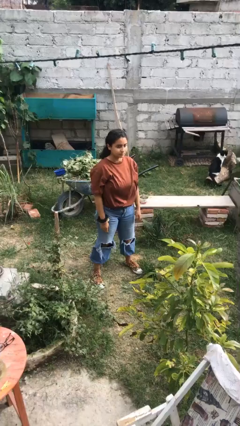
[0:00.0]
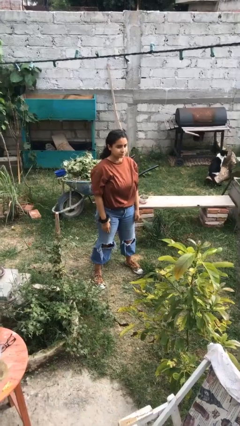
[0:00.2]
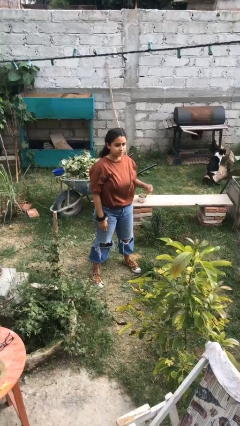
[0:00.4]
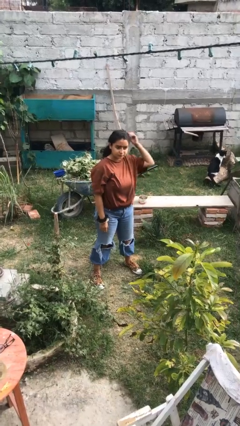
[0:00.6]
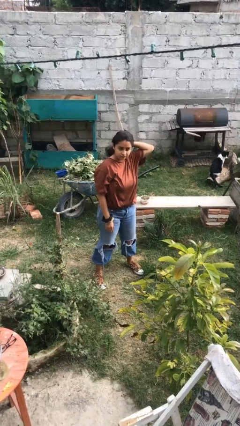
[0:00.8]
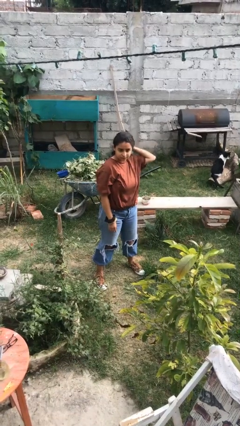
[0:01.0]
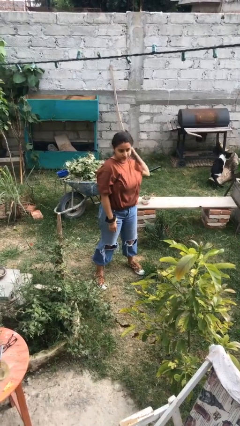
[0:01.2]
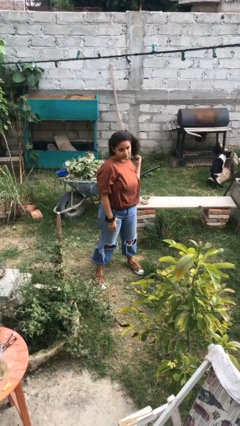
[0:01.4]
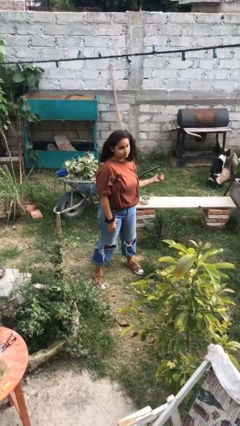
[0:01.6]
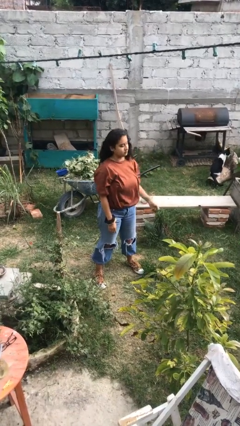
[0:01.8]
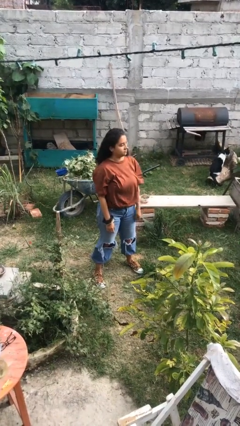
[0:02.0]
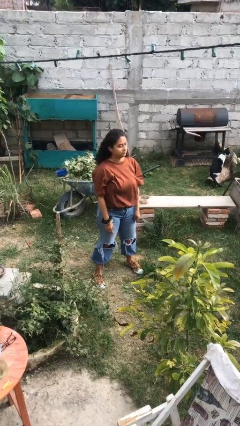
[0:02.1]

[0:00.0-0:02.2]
person takes off hairtie

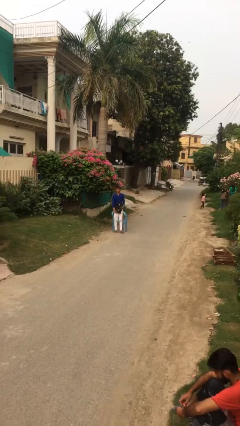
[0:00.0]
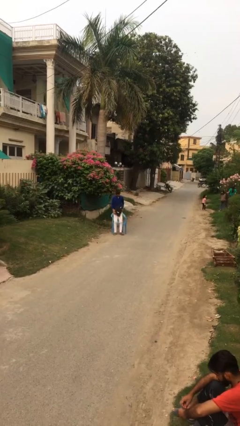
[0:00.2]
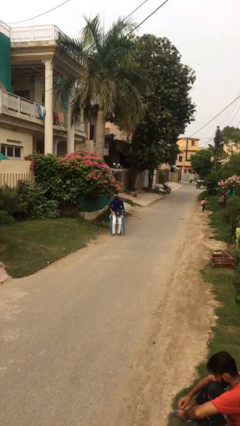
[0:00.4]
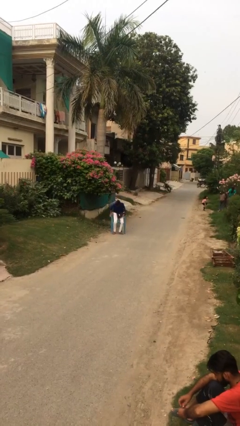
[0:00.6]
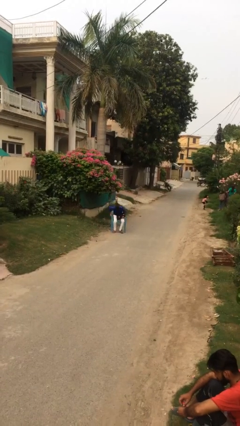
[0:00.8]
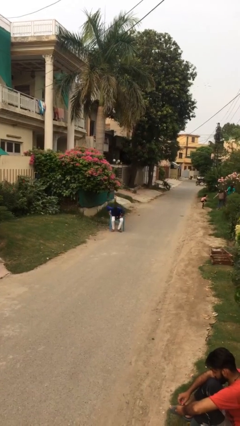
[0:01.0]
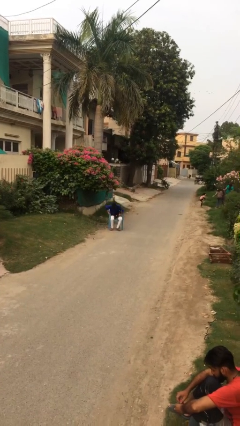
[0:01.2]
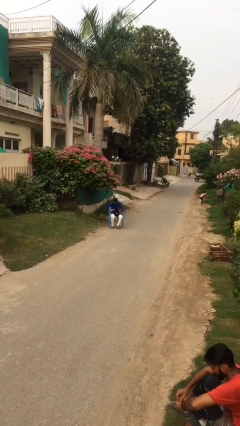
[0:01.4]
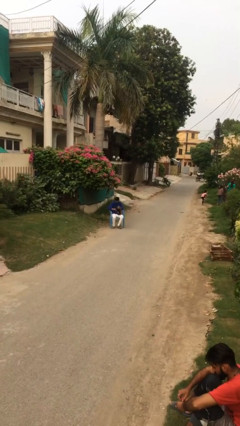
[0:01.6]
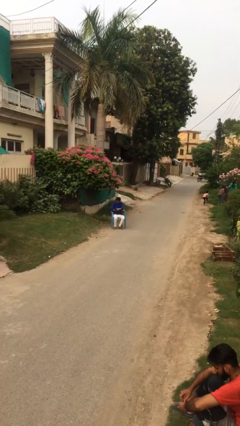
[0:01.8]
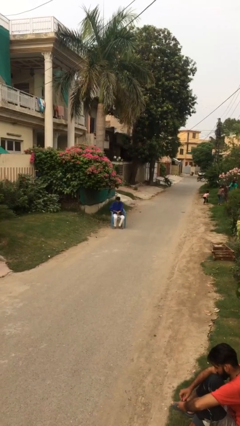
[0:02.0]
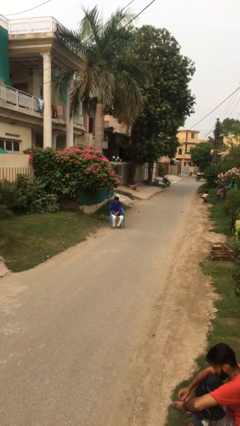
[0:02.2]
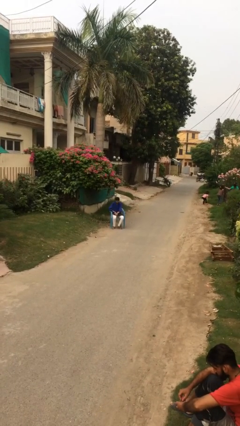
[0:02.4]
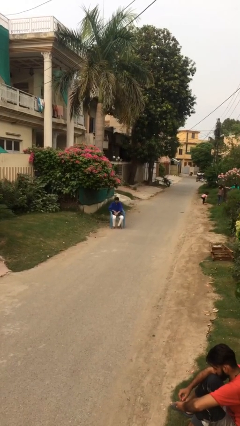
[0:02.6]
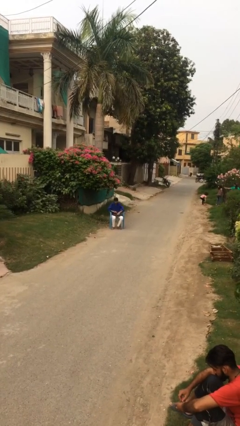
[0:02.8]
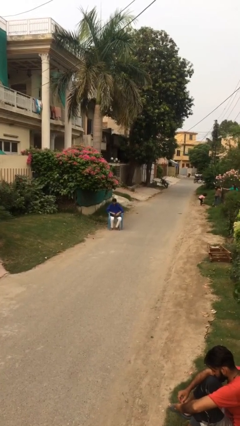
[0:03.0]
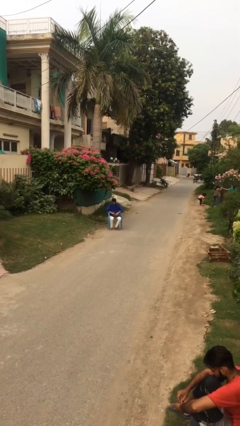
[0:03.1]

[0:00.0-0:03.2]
person sits down

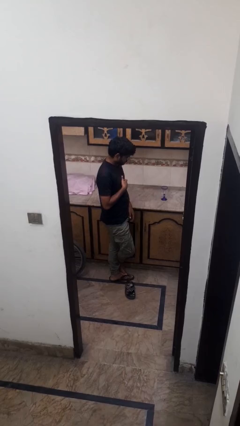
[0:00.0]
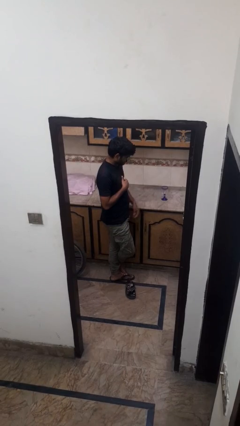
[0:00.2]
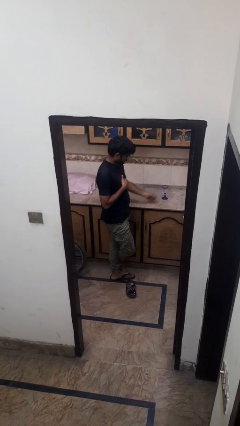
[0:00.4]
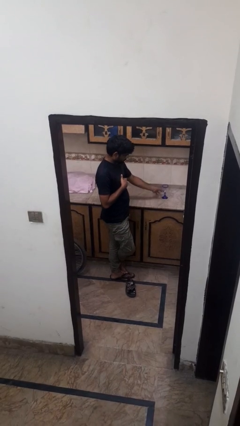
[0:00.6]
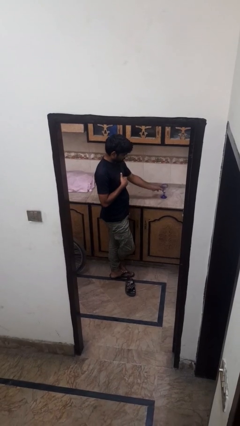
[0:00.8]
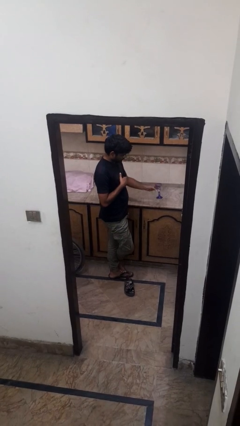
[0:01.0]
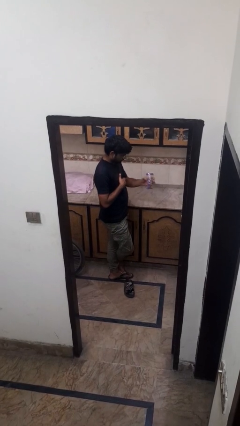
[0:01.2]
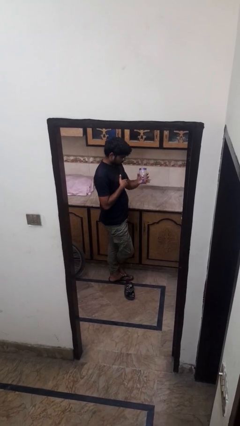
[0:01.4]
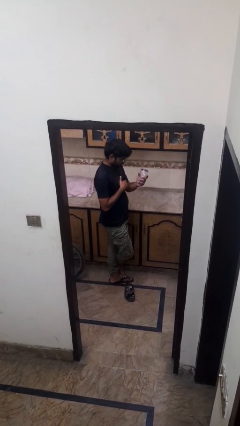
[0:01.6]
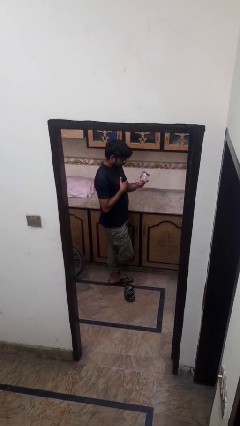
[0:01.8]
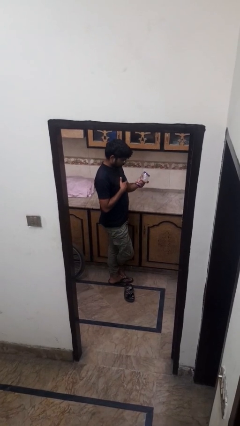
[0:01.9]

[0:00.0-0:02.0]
person picks up object from countertop

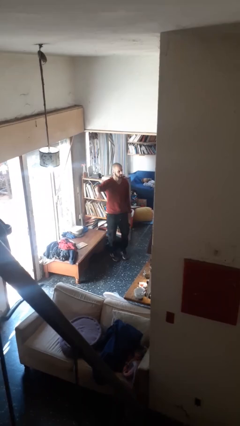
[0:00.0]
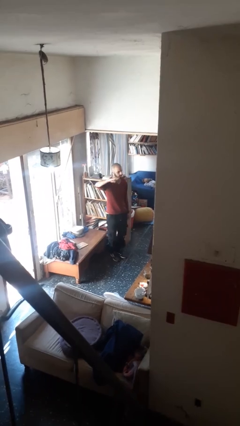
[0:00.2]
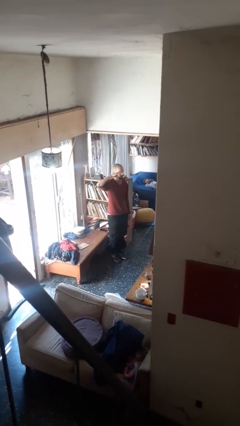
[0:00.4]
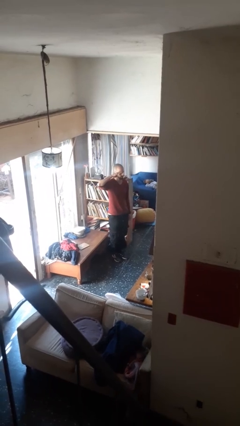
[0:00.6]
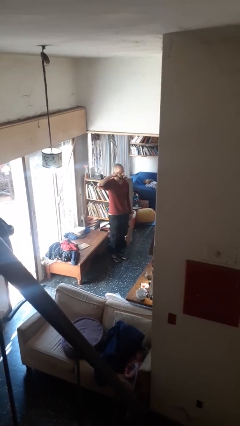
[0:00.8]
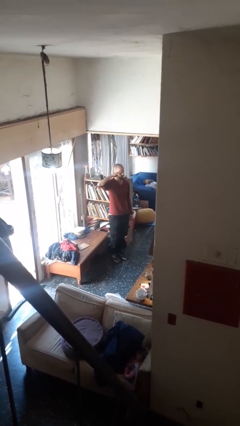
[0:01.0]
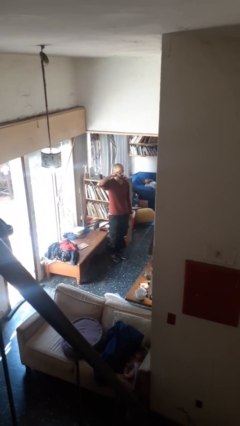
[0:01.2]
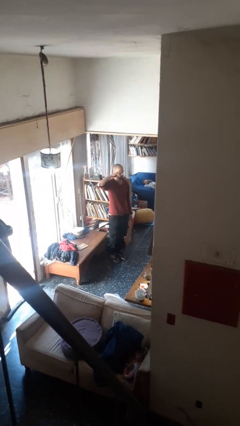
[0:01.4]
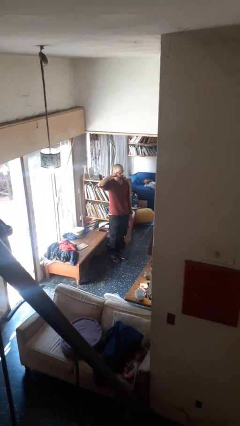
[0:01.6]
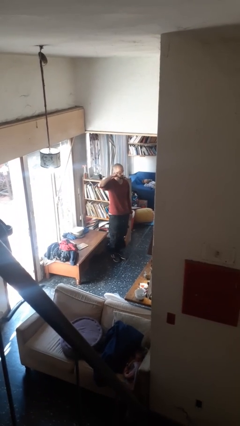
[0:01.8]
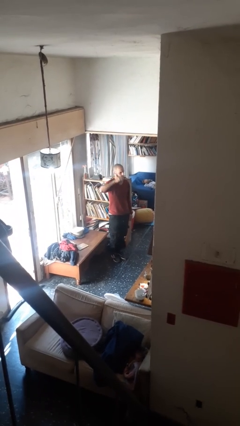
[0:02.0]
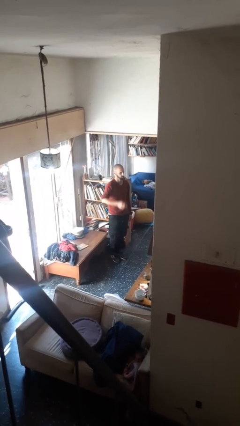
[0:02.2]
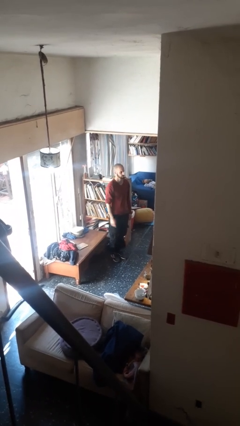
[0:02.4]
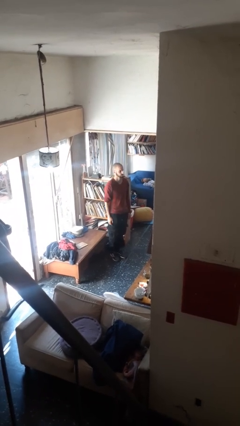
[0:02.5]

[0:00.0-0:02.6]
person salutes

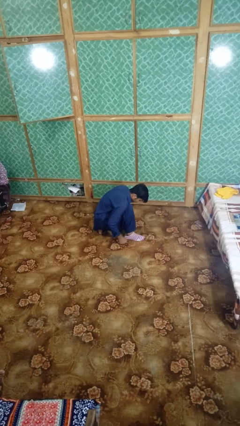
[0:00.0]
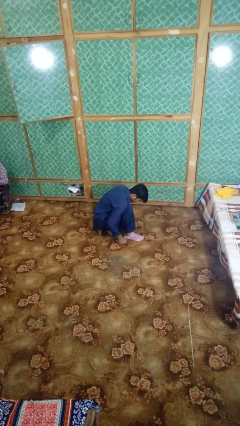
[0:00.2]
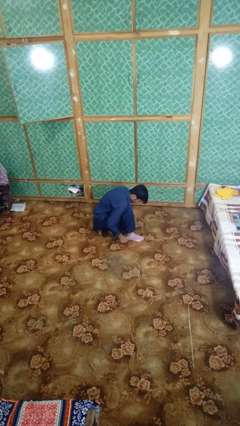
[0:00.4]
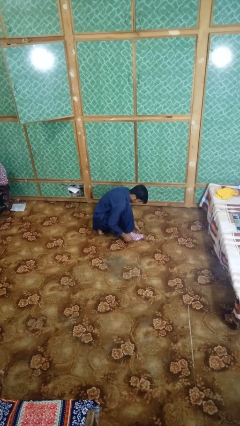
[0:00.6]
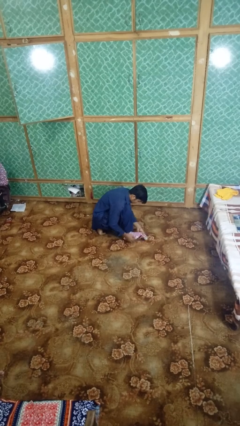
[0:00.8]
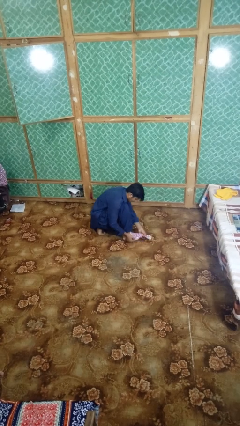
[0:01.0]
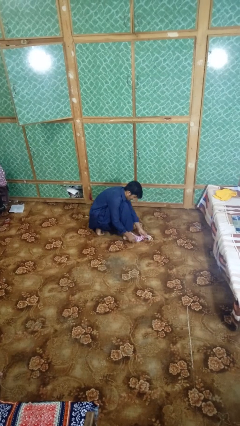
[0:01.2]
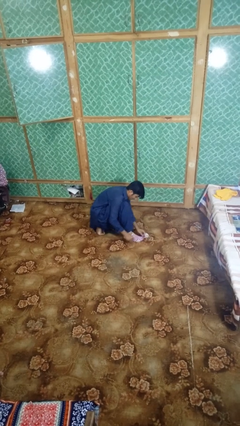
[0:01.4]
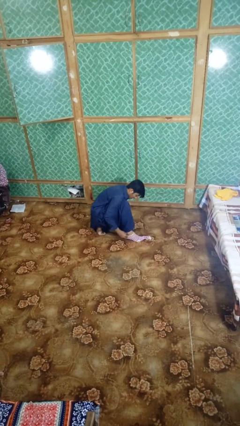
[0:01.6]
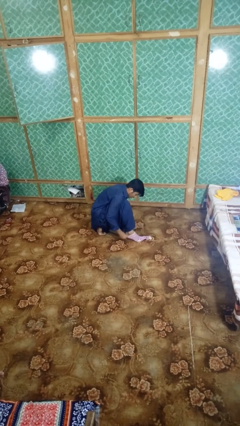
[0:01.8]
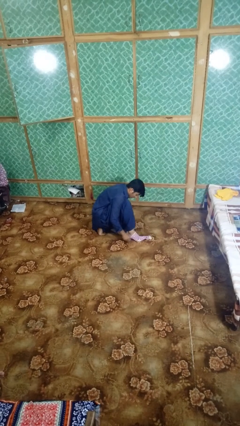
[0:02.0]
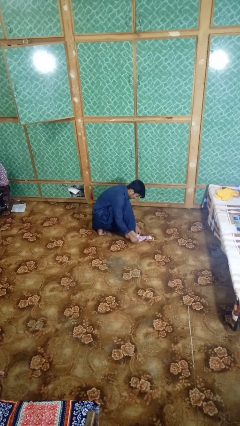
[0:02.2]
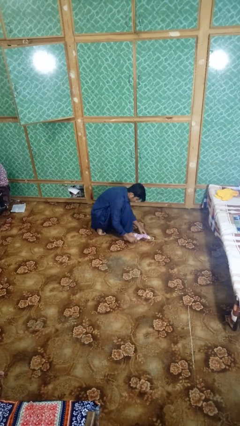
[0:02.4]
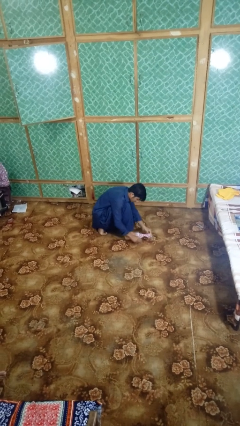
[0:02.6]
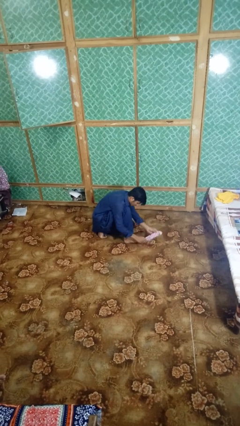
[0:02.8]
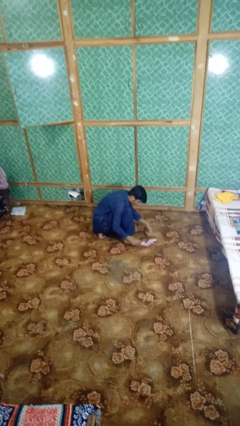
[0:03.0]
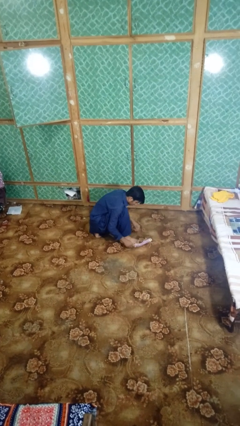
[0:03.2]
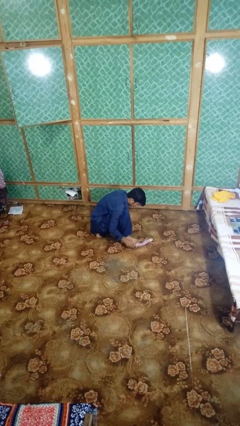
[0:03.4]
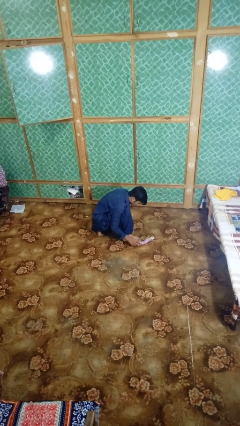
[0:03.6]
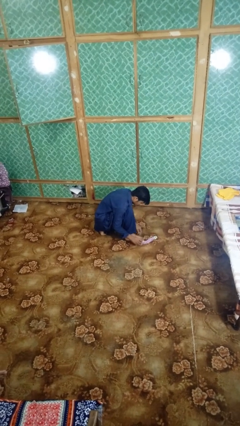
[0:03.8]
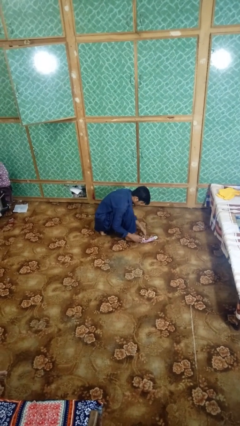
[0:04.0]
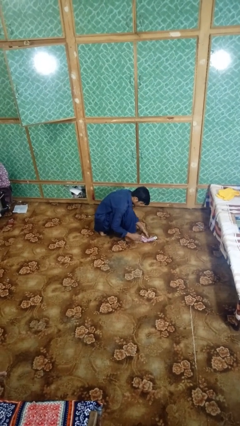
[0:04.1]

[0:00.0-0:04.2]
person takes off socks

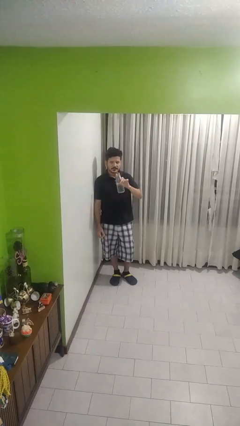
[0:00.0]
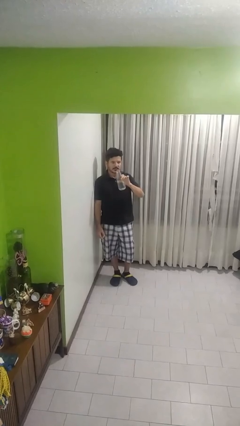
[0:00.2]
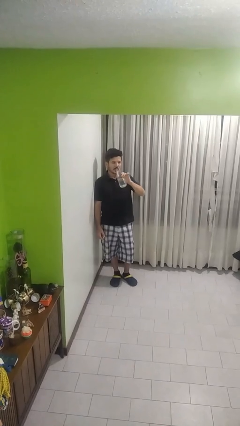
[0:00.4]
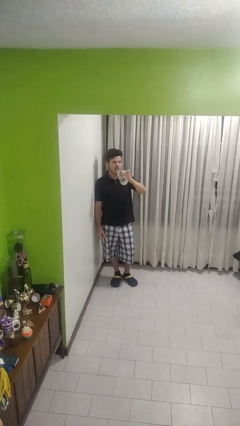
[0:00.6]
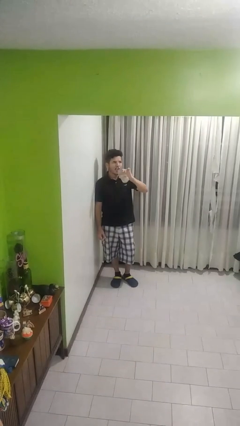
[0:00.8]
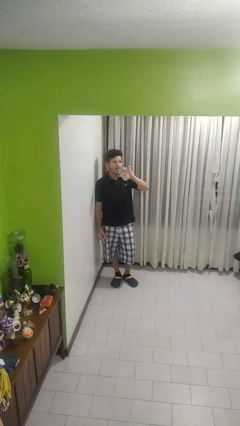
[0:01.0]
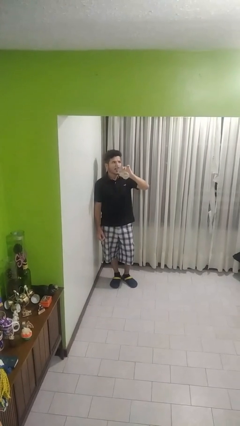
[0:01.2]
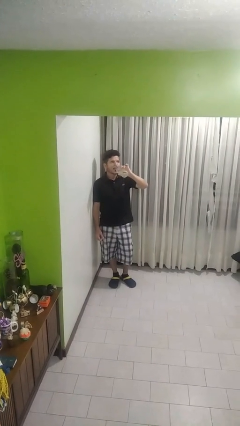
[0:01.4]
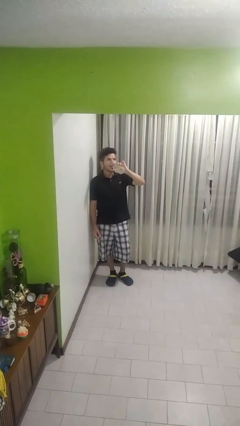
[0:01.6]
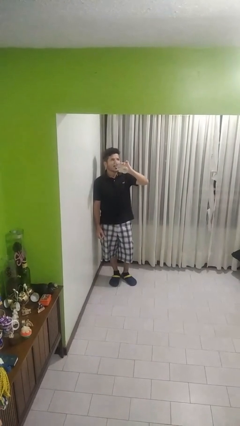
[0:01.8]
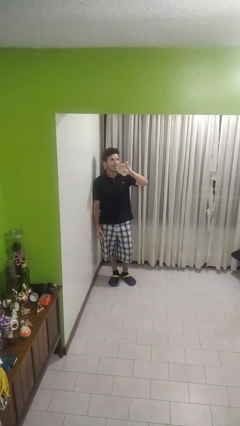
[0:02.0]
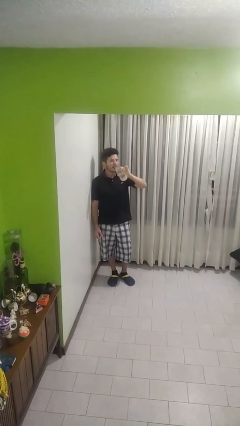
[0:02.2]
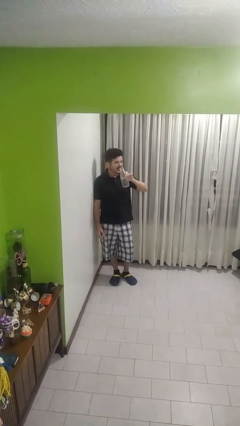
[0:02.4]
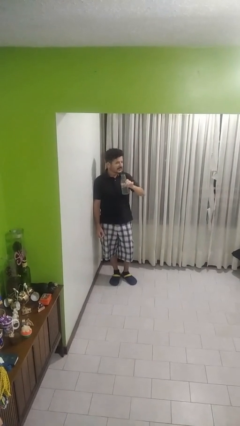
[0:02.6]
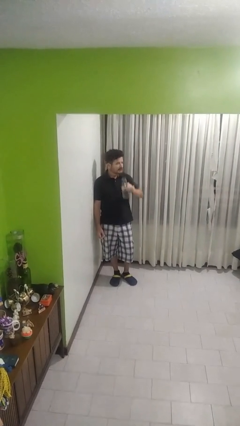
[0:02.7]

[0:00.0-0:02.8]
person drinks from bottle

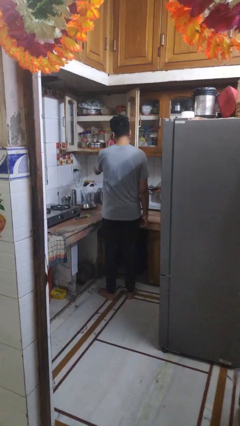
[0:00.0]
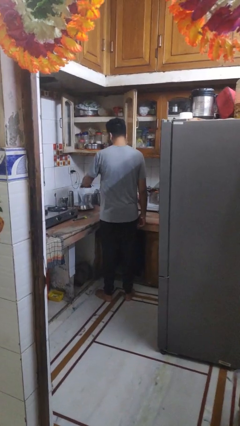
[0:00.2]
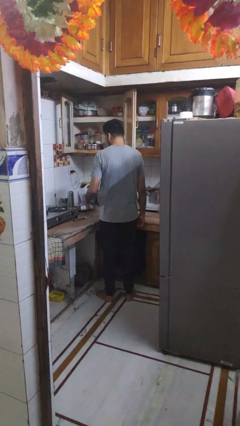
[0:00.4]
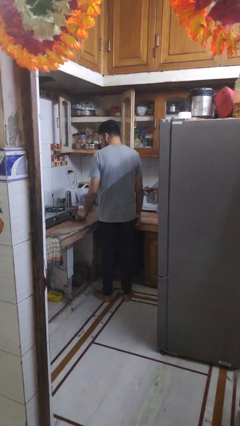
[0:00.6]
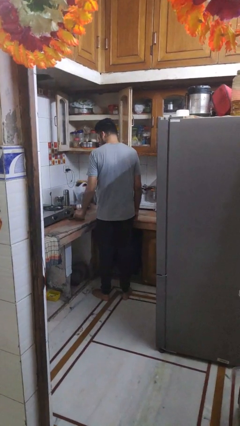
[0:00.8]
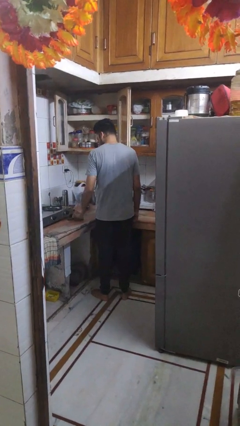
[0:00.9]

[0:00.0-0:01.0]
person takes object from cabinet
